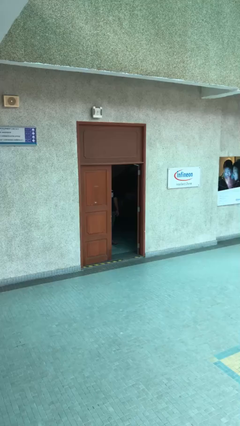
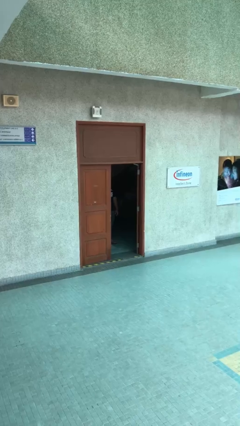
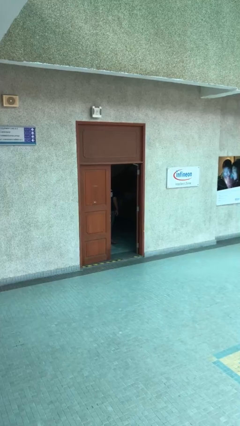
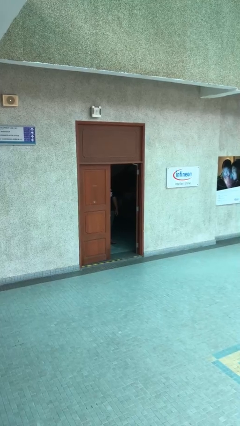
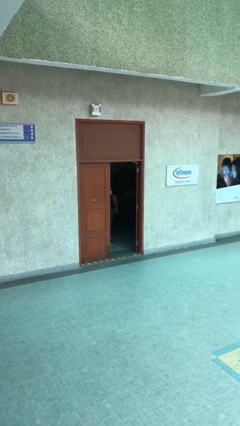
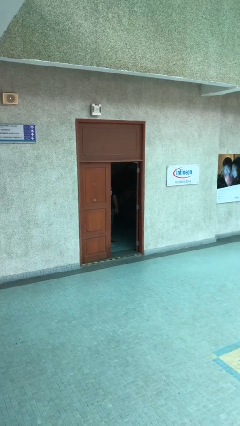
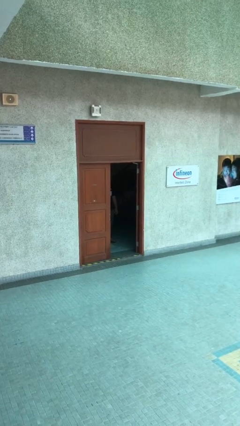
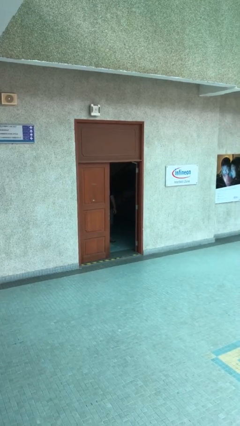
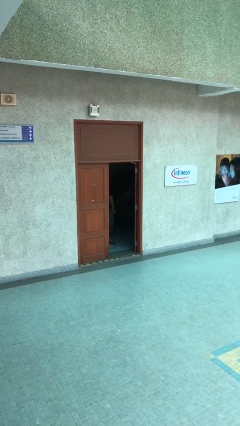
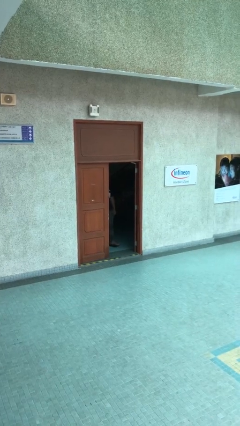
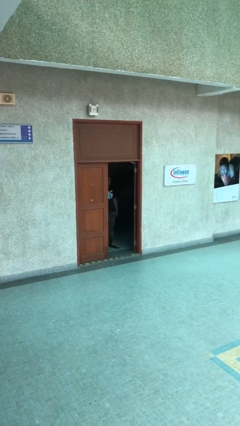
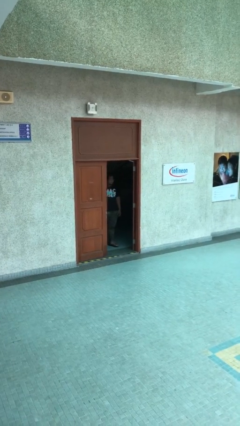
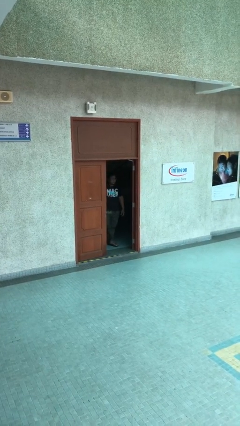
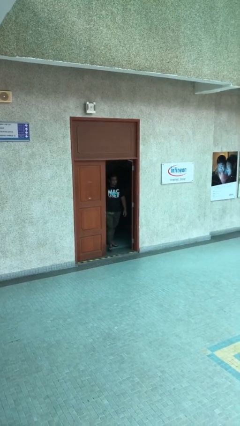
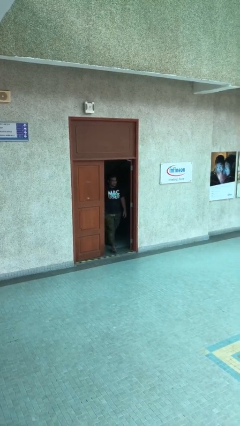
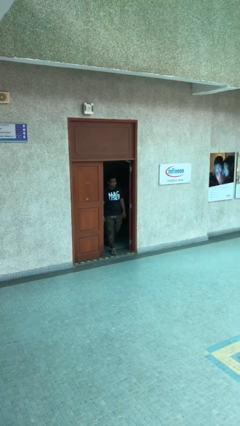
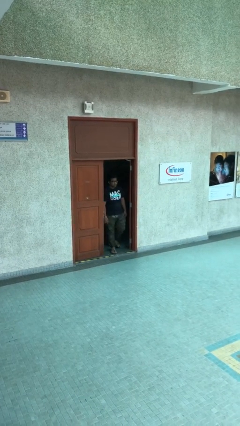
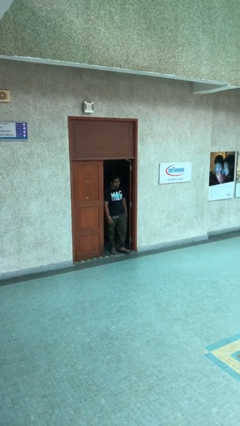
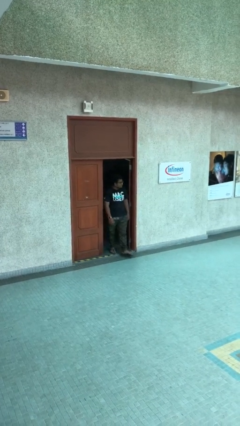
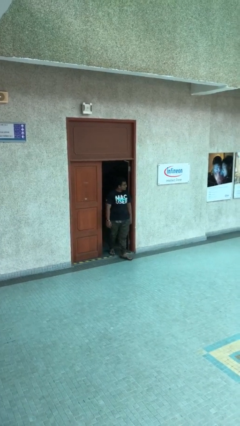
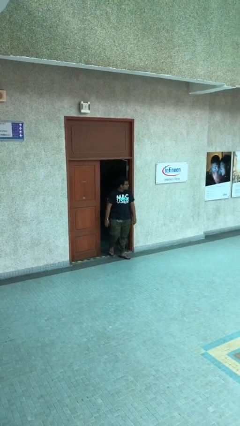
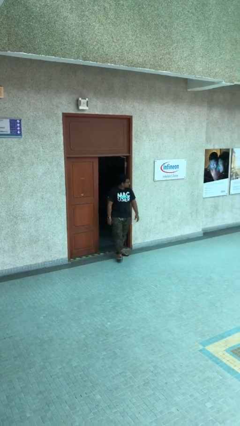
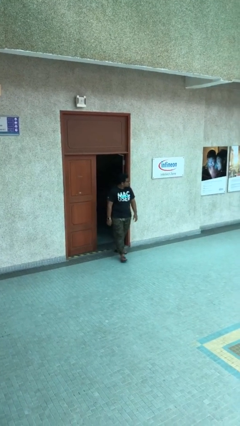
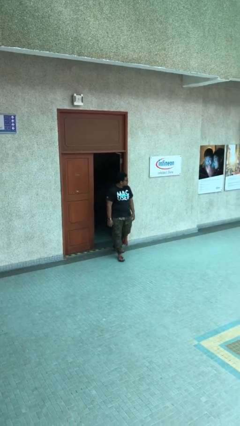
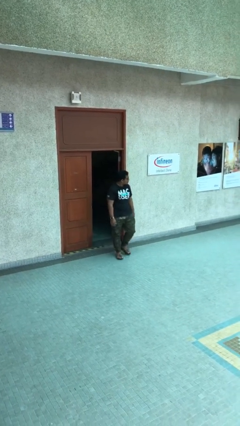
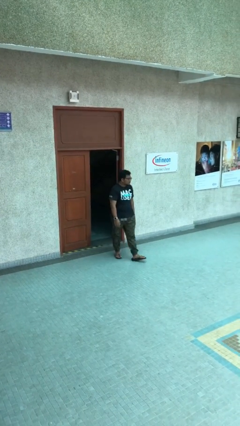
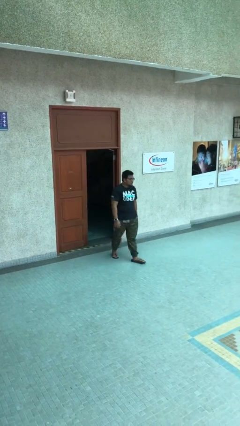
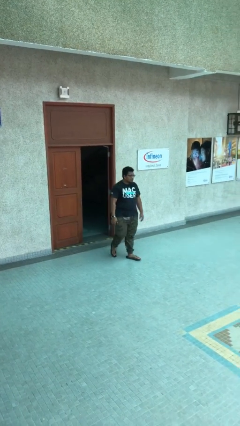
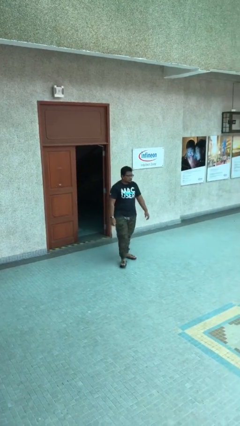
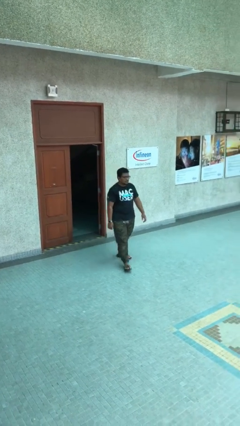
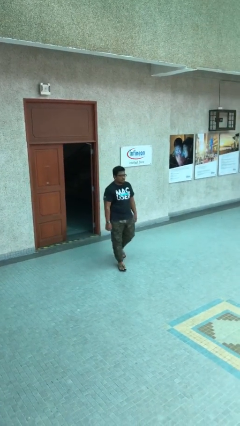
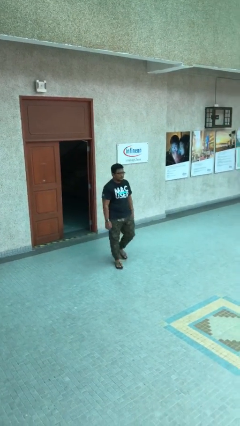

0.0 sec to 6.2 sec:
person enters scene through structure

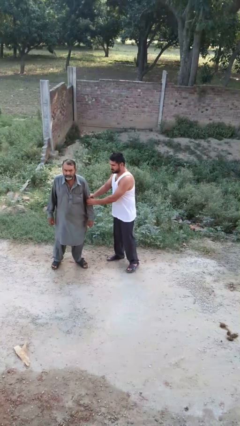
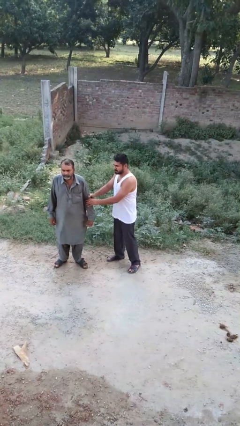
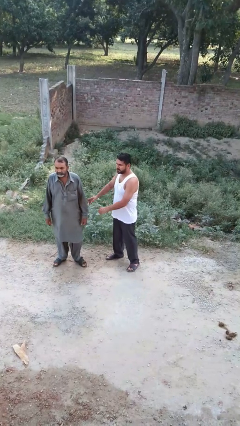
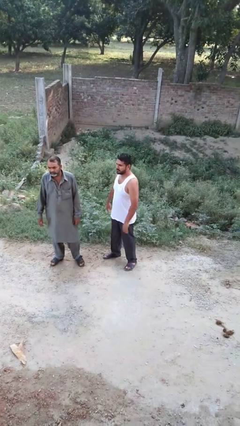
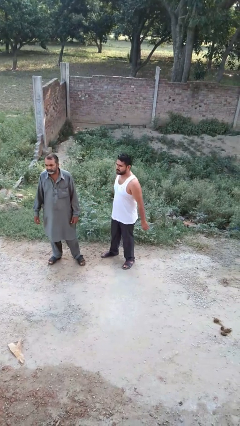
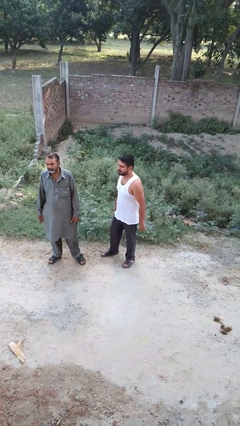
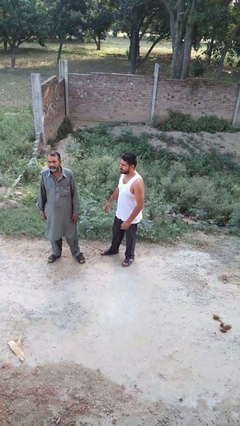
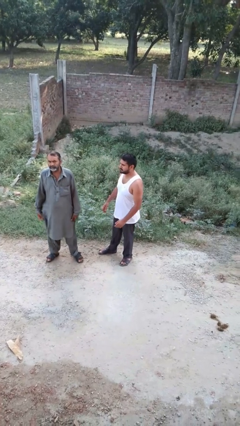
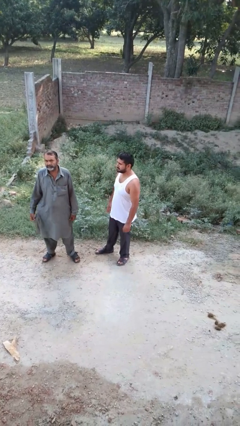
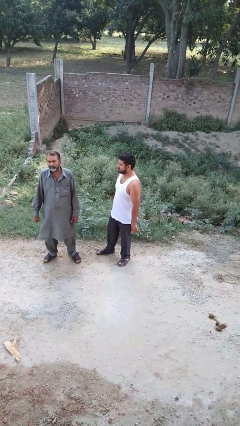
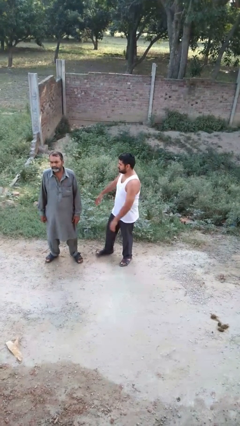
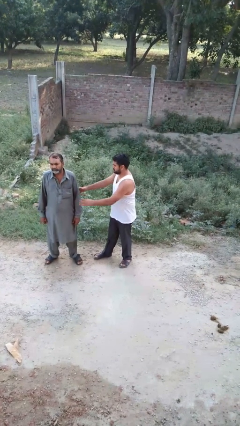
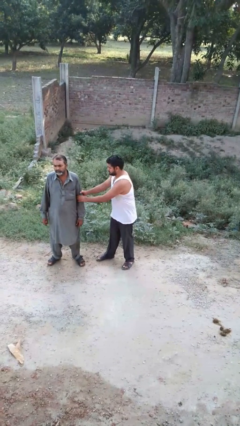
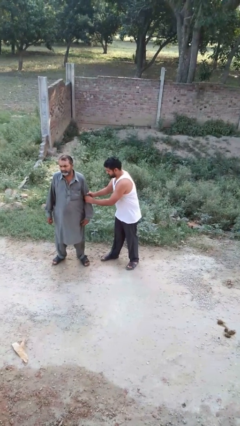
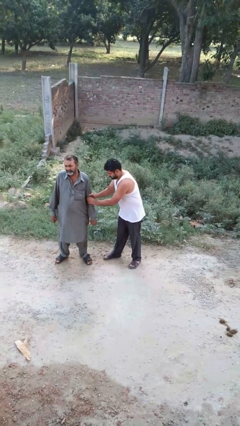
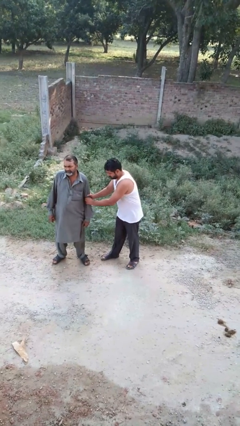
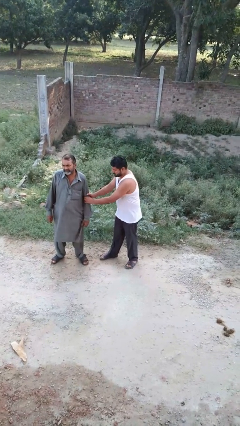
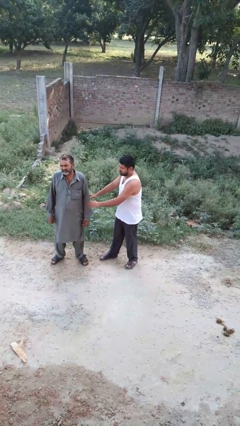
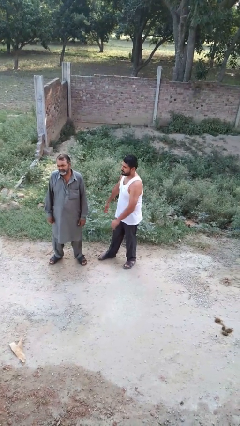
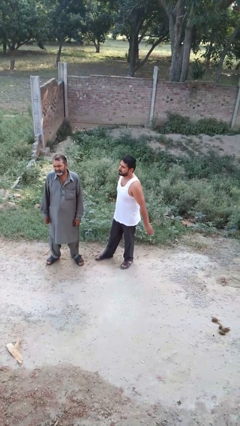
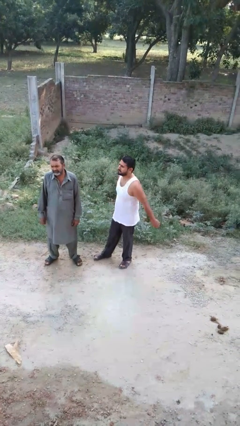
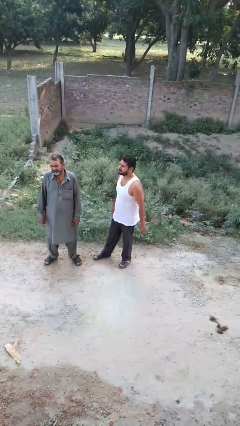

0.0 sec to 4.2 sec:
person grabs person by forearm

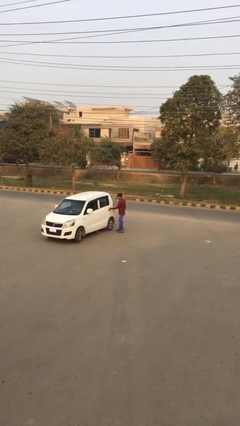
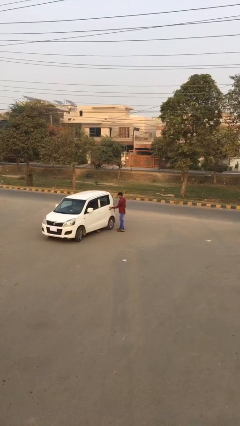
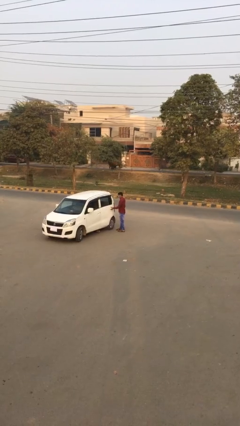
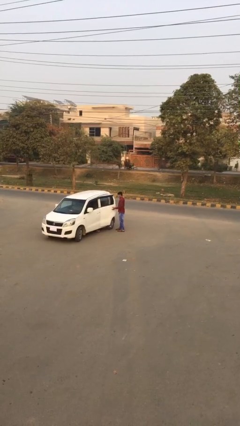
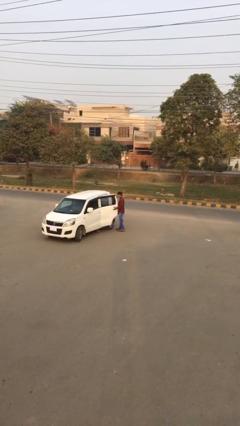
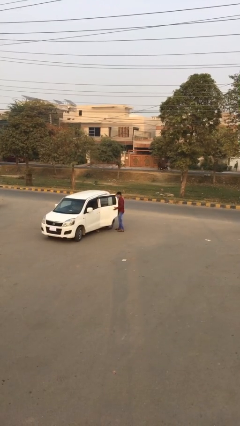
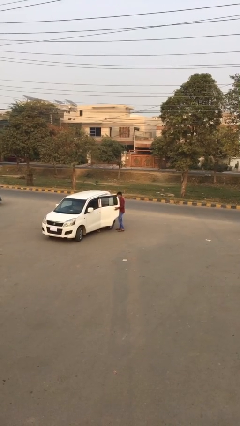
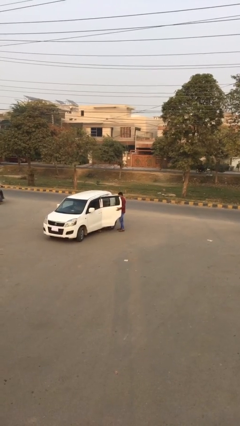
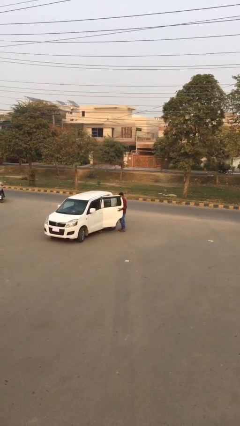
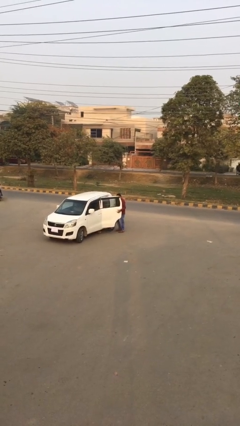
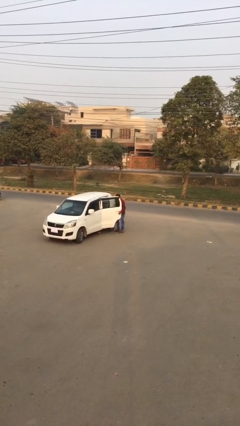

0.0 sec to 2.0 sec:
person opens car door

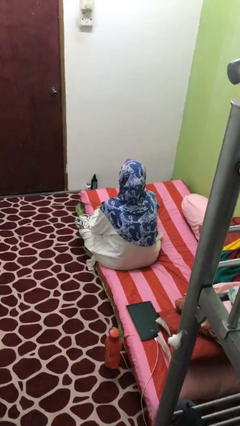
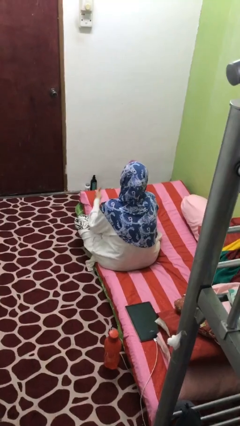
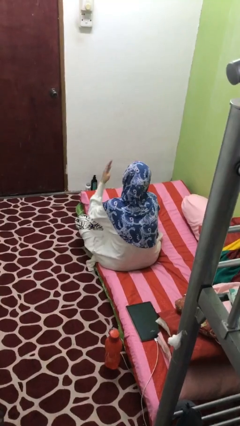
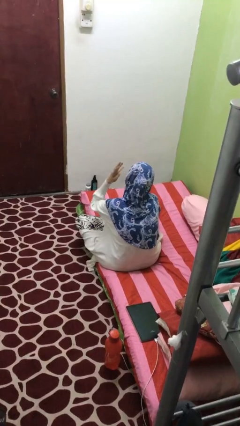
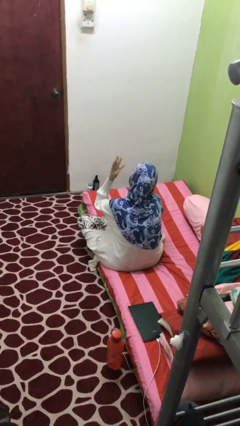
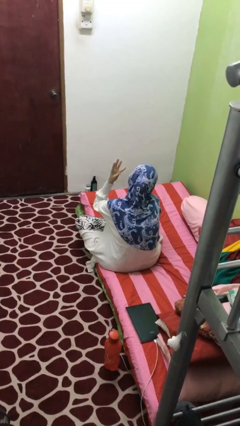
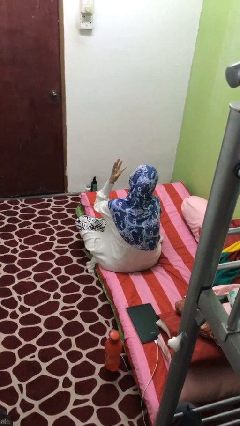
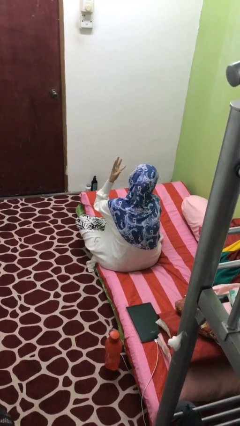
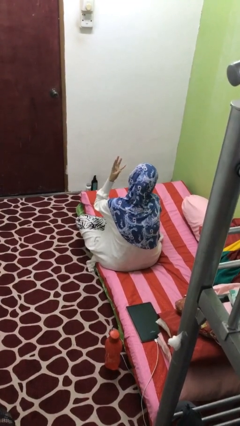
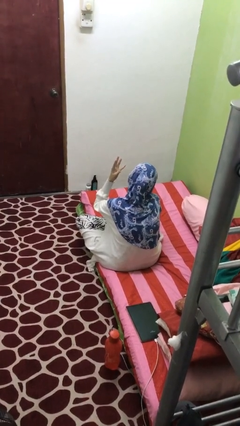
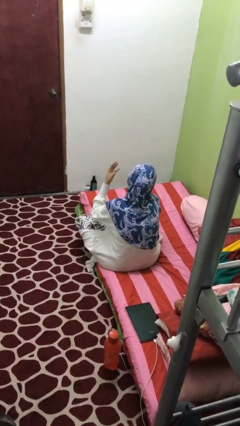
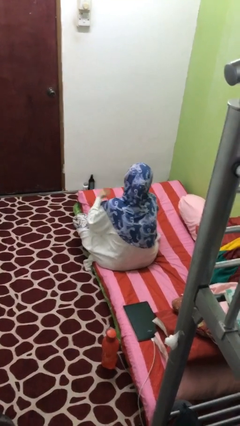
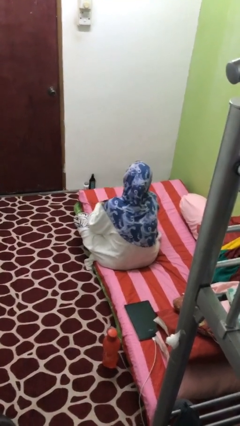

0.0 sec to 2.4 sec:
person gestures number four

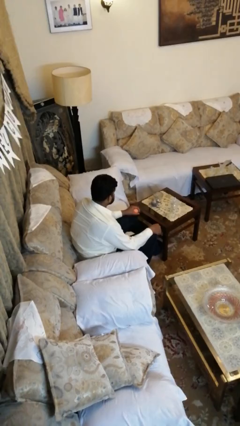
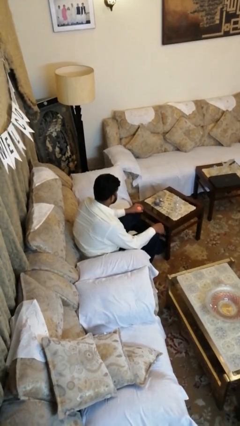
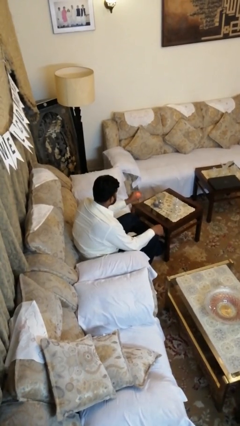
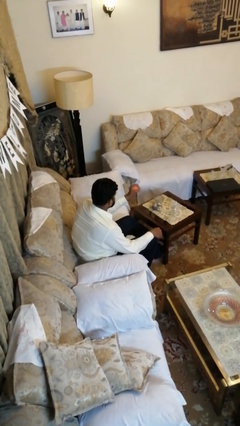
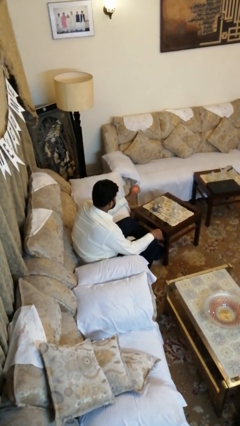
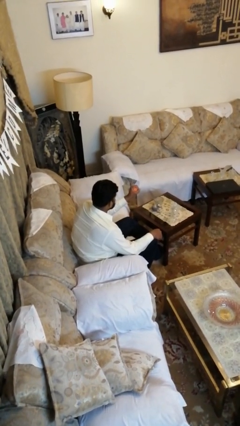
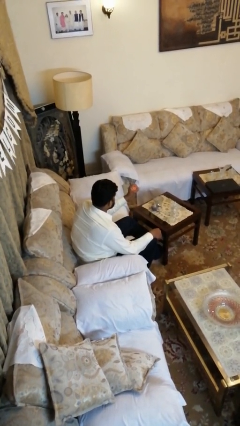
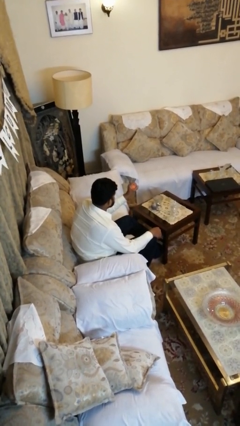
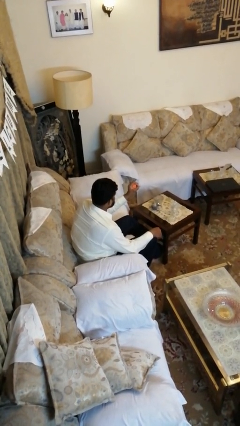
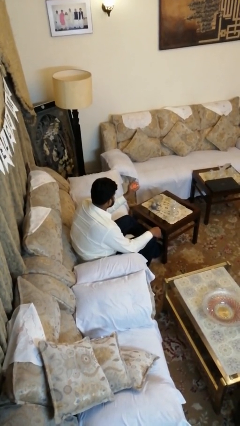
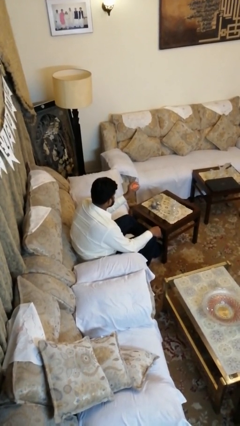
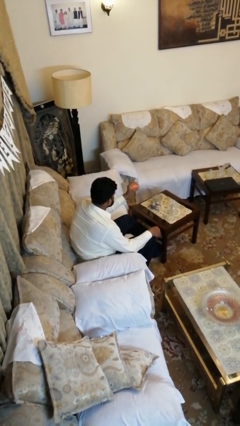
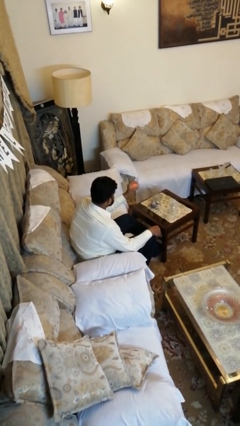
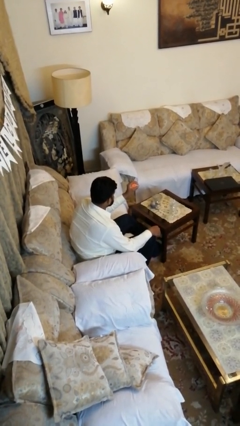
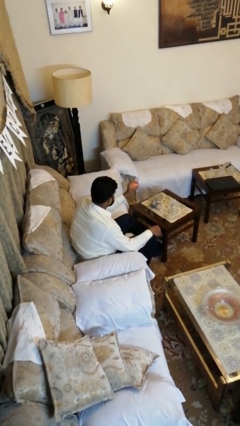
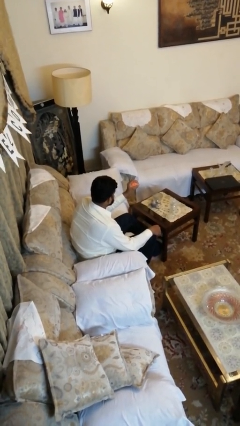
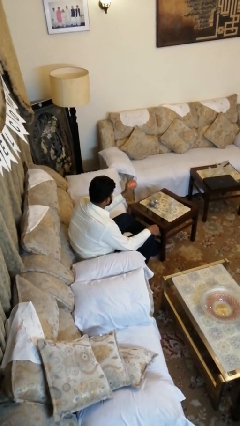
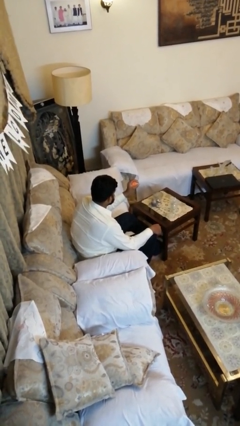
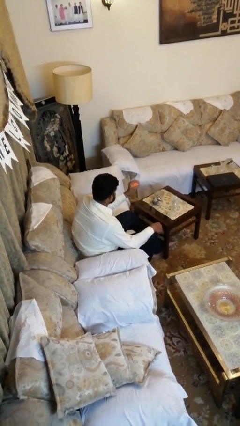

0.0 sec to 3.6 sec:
person squeezes object
